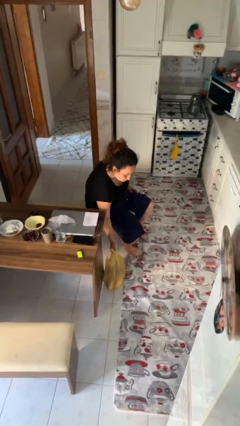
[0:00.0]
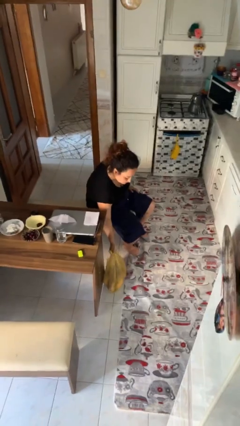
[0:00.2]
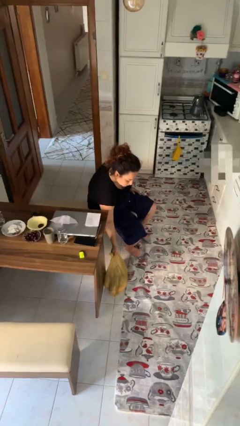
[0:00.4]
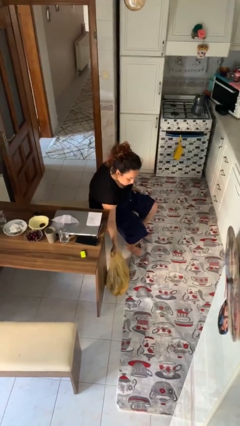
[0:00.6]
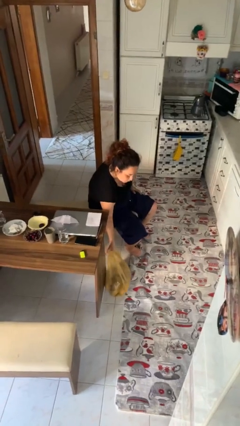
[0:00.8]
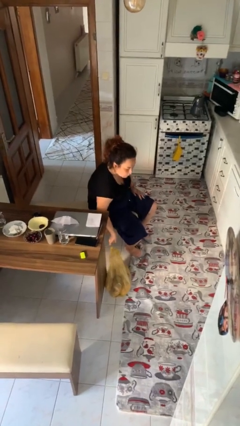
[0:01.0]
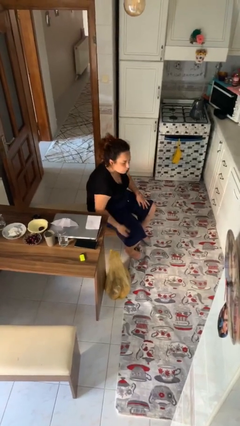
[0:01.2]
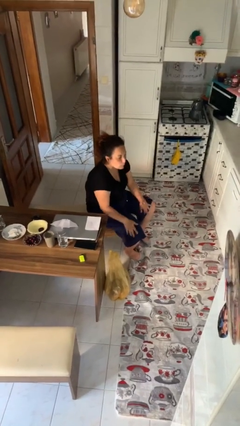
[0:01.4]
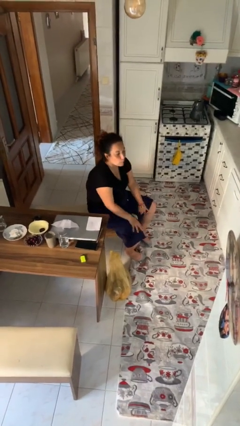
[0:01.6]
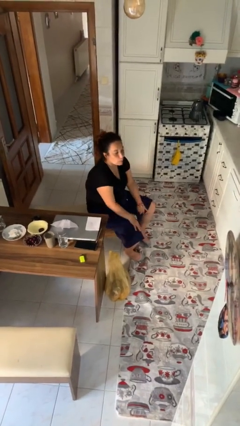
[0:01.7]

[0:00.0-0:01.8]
person puts down object on floor

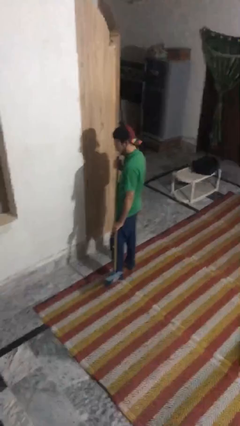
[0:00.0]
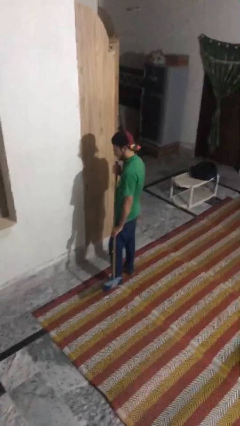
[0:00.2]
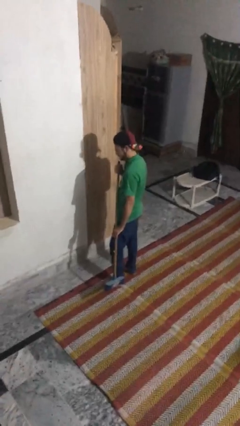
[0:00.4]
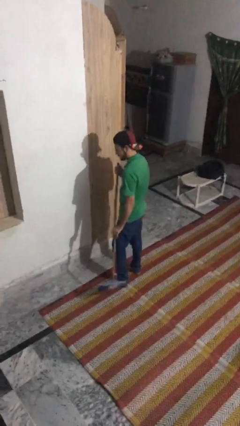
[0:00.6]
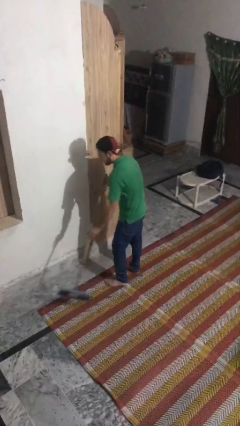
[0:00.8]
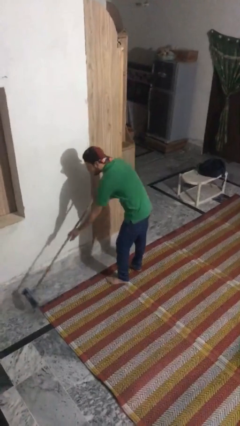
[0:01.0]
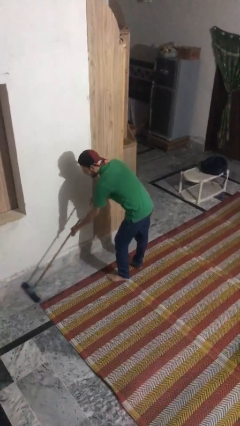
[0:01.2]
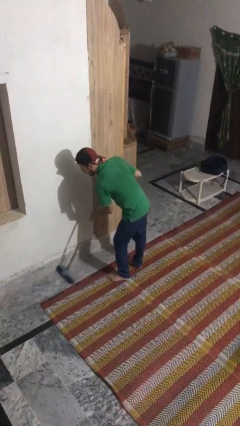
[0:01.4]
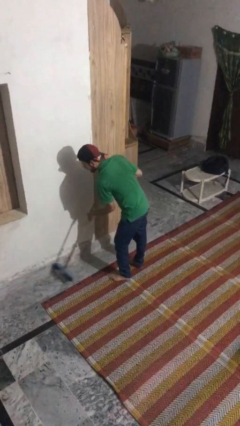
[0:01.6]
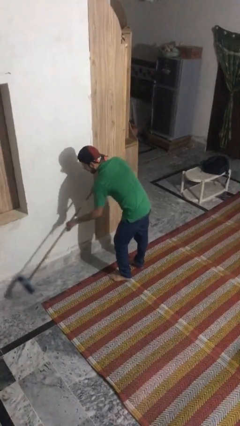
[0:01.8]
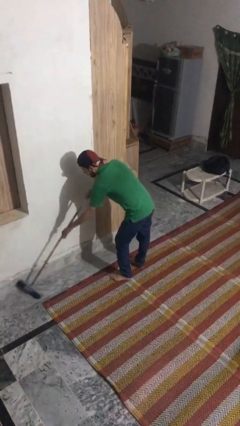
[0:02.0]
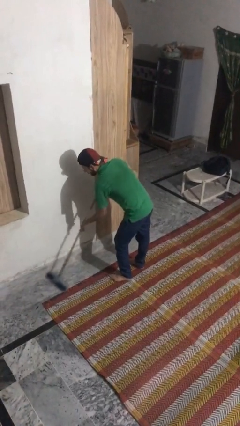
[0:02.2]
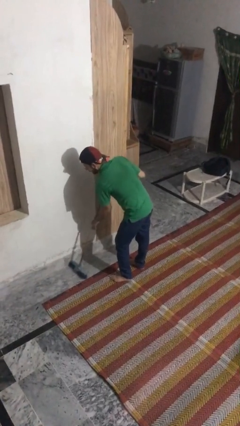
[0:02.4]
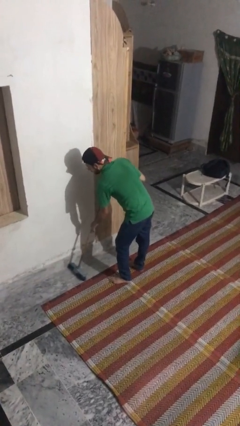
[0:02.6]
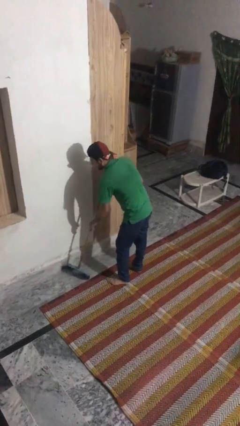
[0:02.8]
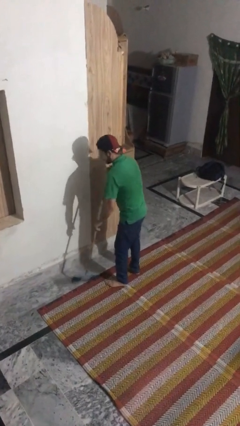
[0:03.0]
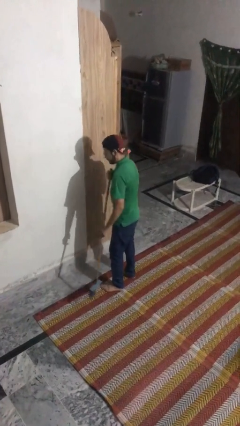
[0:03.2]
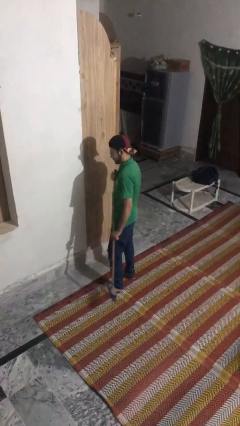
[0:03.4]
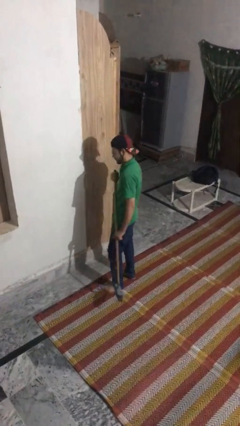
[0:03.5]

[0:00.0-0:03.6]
person sweeps floor

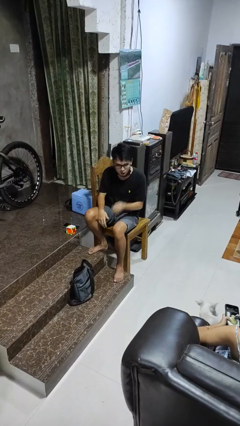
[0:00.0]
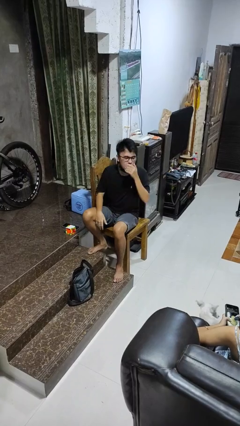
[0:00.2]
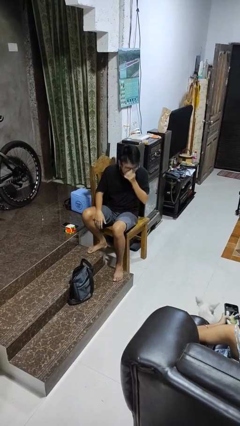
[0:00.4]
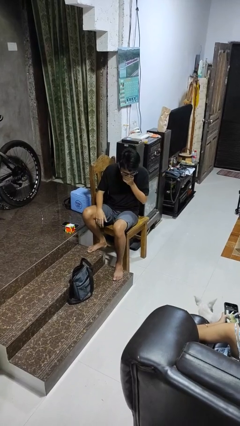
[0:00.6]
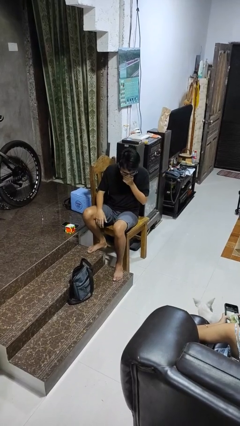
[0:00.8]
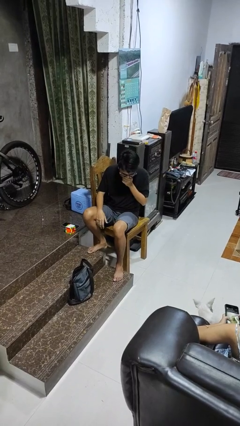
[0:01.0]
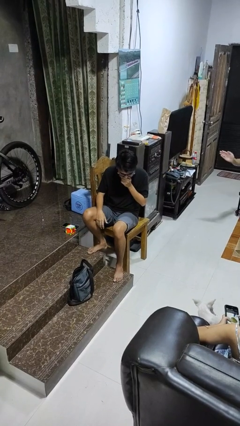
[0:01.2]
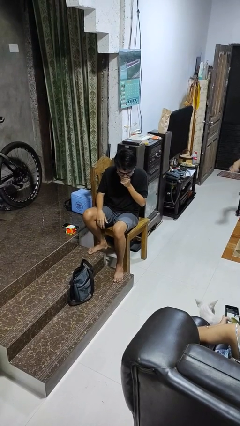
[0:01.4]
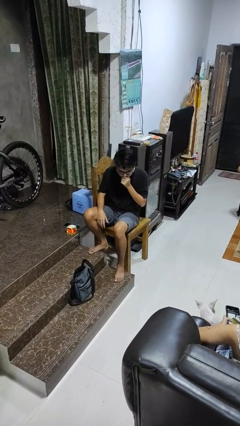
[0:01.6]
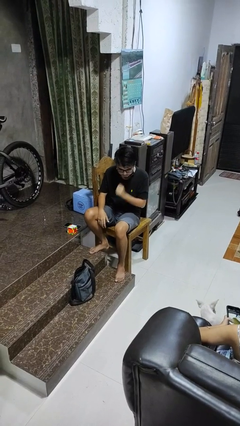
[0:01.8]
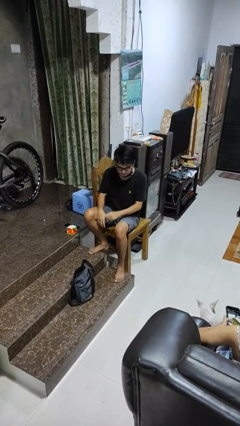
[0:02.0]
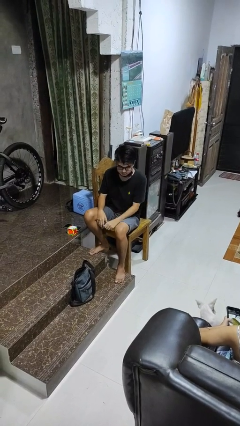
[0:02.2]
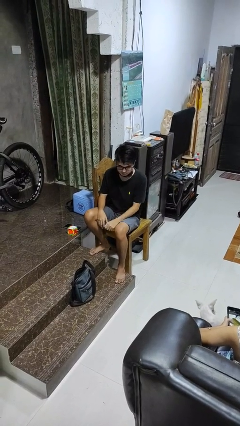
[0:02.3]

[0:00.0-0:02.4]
person sneezes into hand

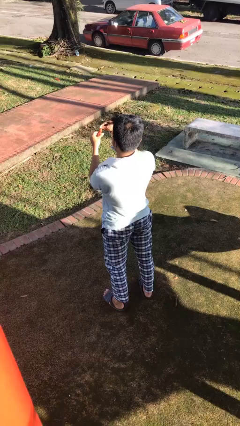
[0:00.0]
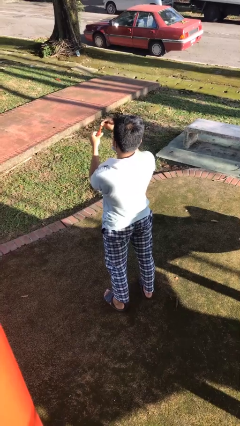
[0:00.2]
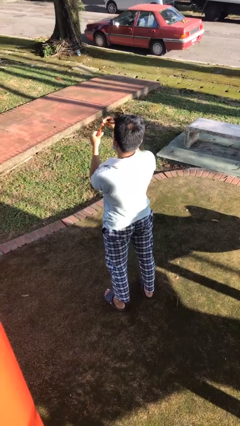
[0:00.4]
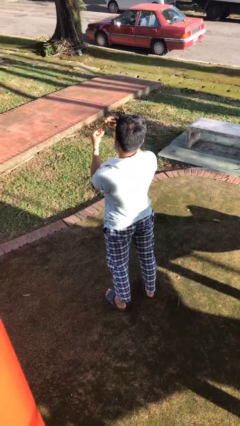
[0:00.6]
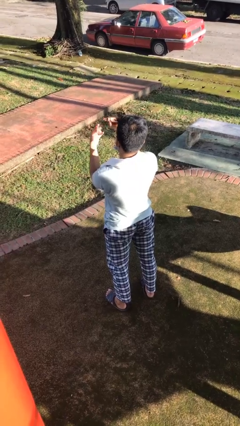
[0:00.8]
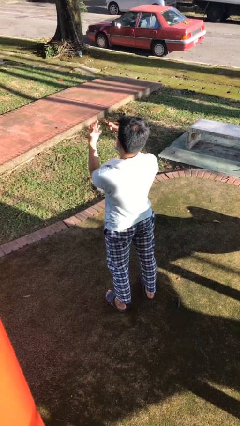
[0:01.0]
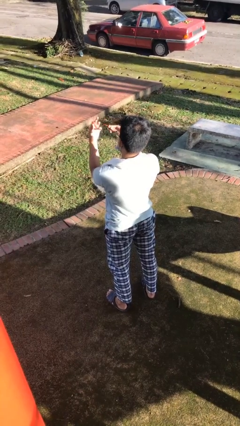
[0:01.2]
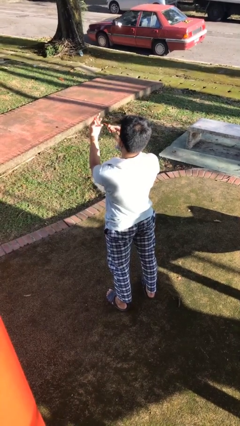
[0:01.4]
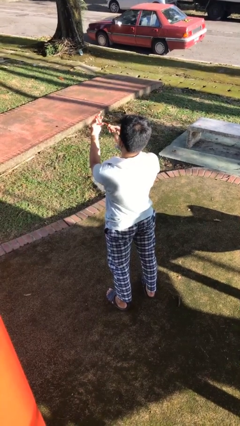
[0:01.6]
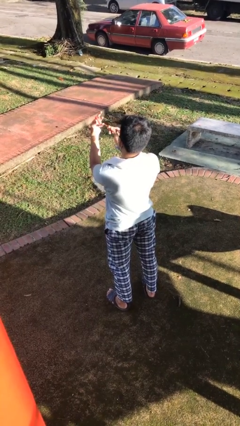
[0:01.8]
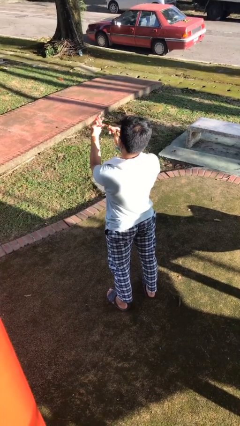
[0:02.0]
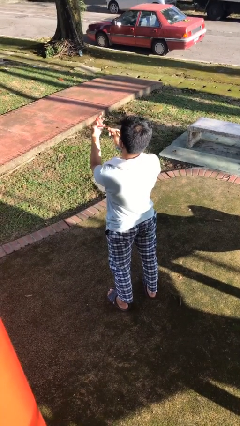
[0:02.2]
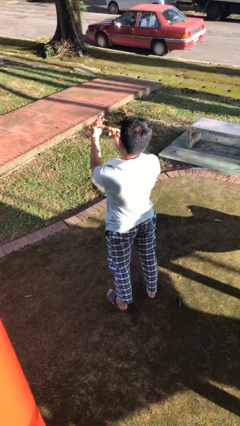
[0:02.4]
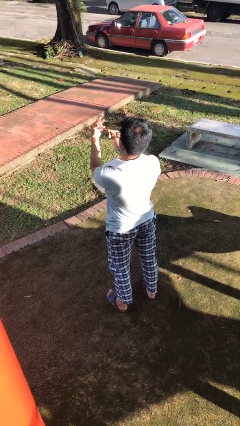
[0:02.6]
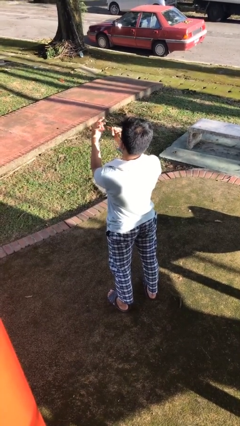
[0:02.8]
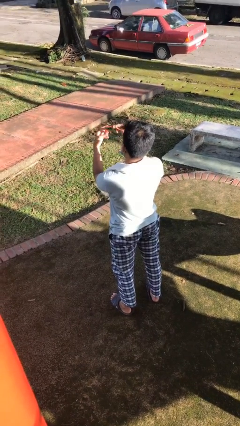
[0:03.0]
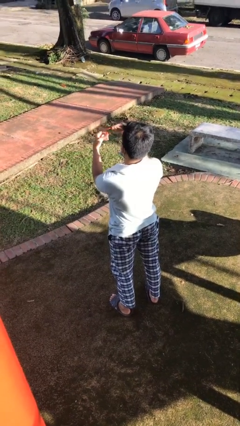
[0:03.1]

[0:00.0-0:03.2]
person paints fingernails

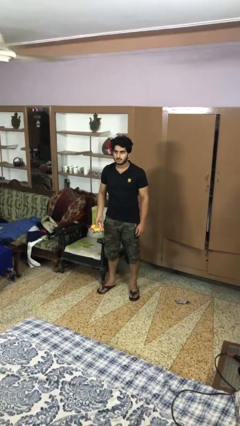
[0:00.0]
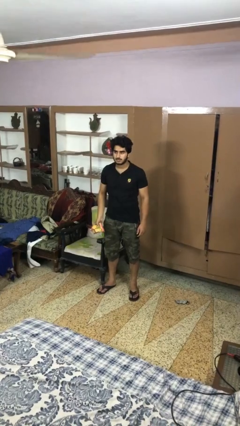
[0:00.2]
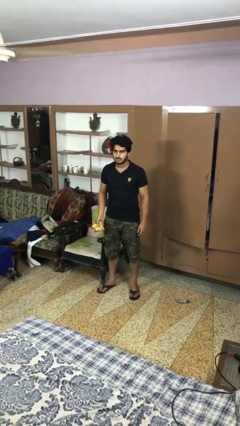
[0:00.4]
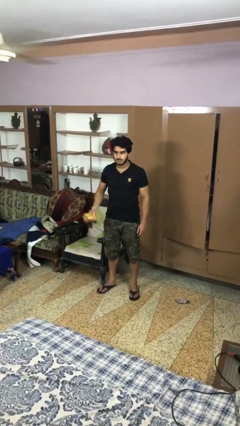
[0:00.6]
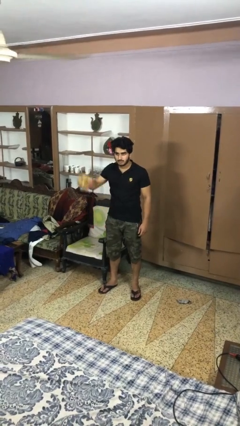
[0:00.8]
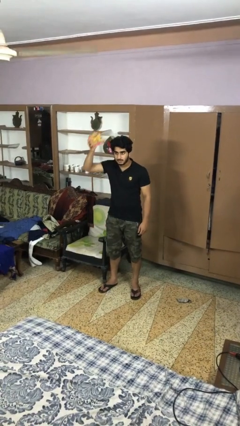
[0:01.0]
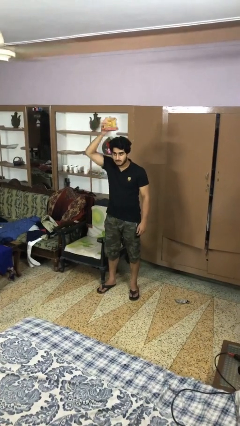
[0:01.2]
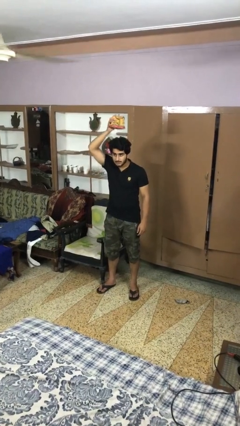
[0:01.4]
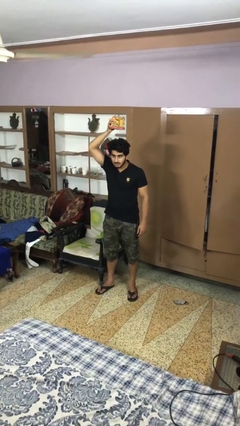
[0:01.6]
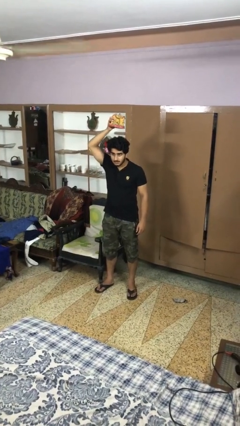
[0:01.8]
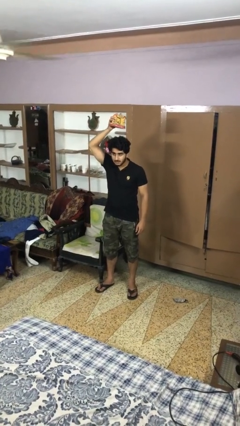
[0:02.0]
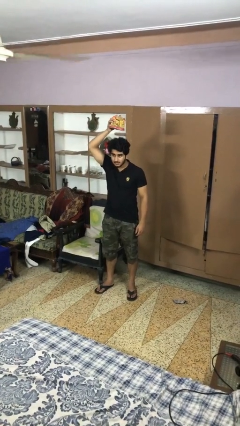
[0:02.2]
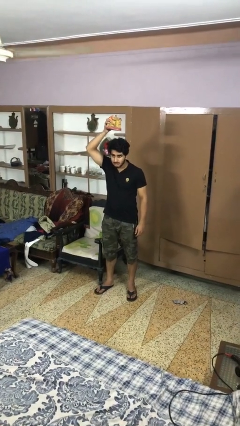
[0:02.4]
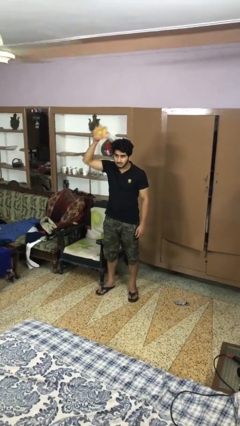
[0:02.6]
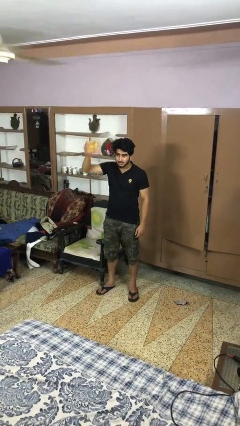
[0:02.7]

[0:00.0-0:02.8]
person holds object above head

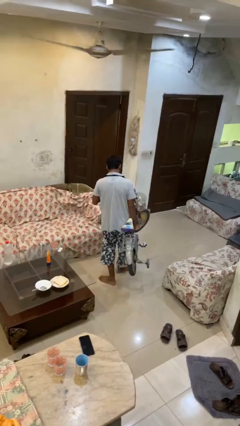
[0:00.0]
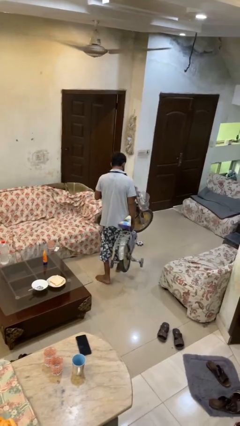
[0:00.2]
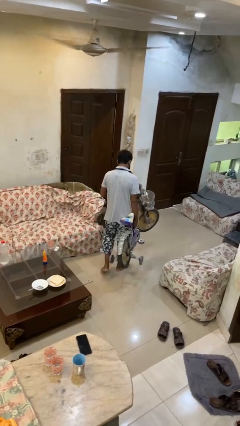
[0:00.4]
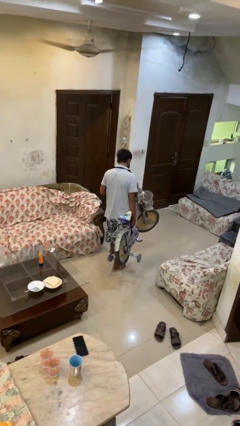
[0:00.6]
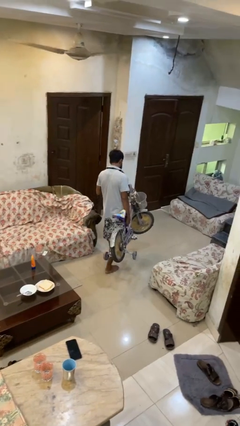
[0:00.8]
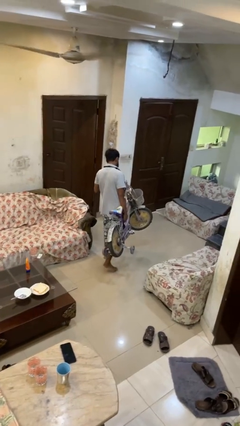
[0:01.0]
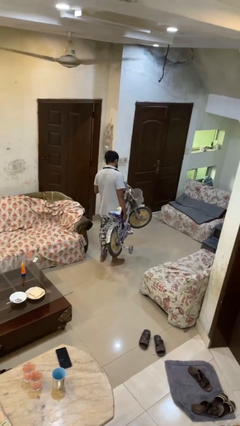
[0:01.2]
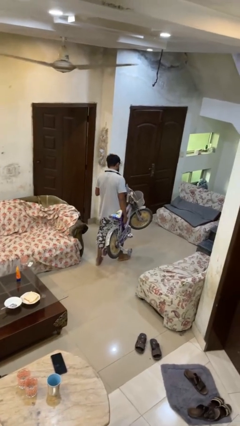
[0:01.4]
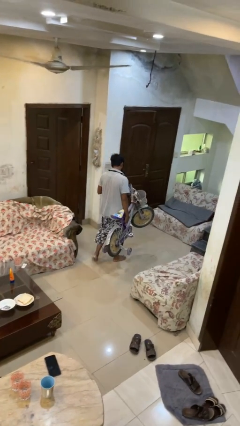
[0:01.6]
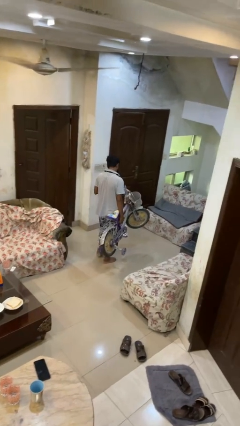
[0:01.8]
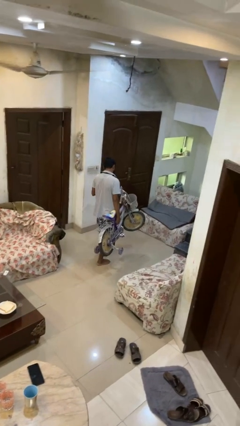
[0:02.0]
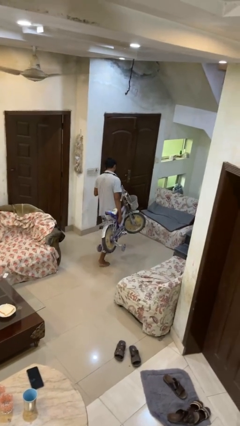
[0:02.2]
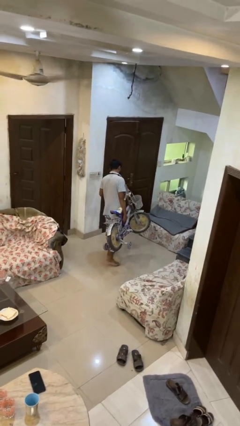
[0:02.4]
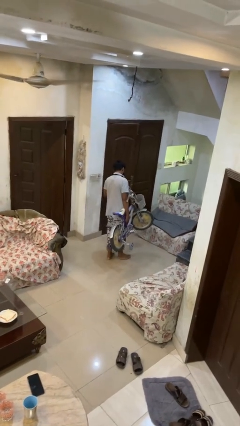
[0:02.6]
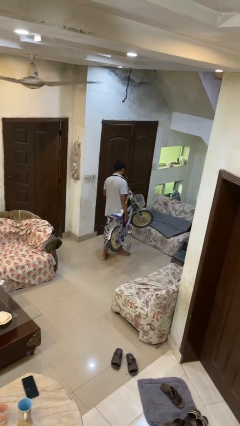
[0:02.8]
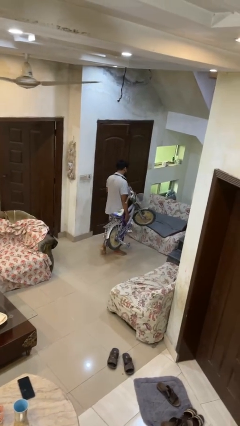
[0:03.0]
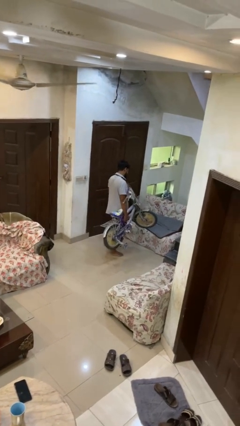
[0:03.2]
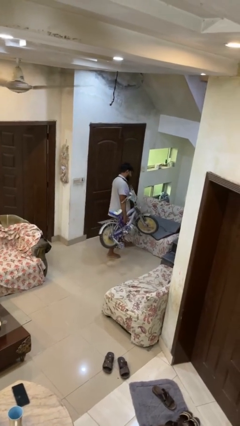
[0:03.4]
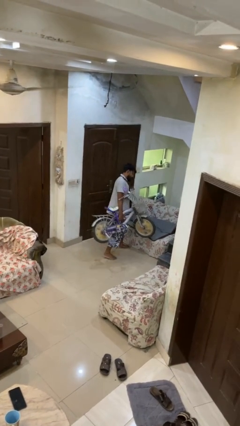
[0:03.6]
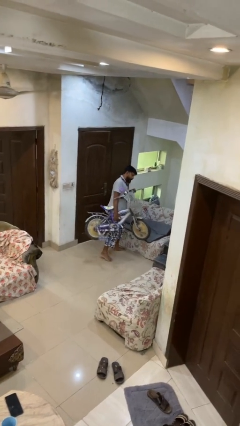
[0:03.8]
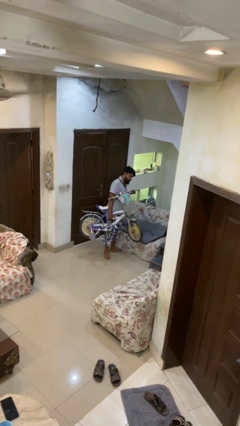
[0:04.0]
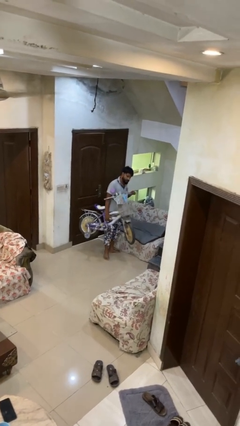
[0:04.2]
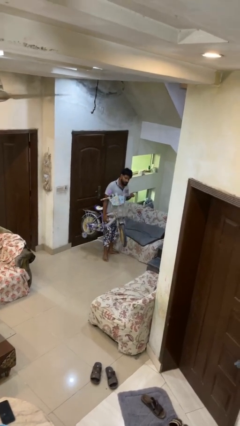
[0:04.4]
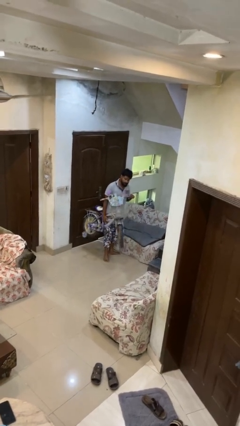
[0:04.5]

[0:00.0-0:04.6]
person carries bicycle
